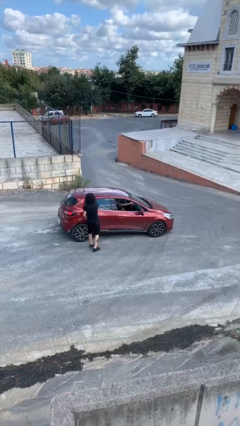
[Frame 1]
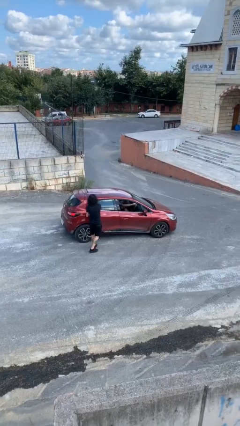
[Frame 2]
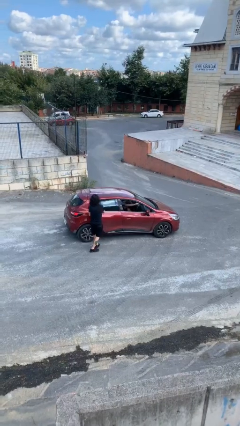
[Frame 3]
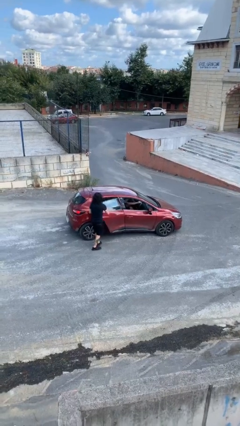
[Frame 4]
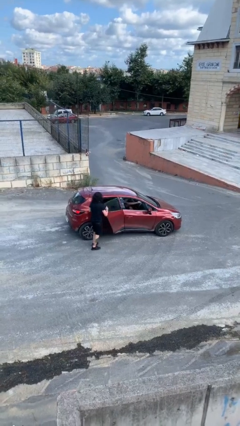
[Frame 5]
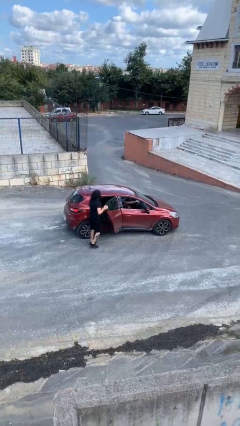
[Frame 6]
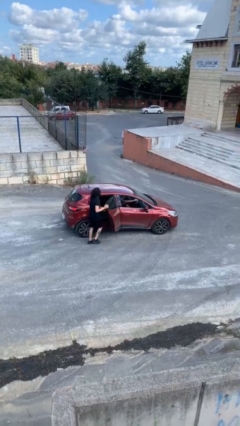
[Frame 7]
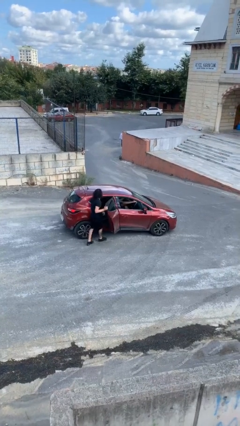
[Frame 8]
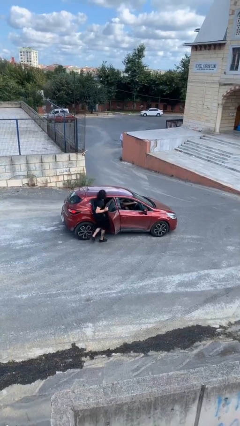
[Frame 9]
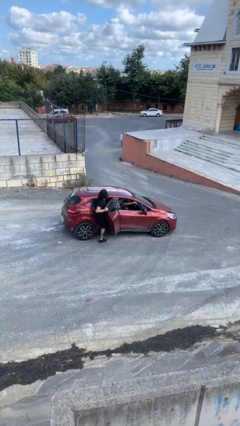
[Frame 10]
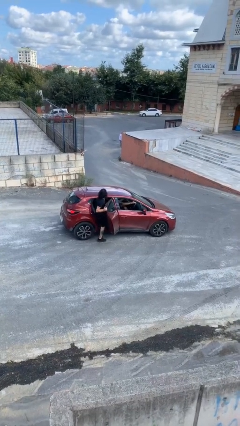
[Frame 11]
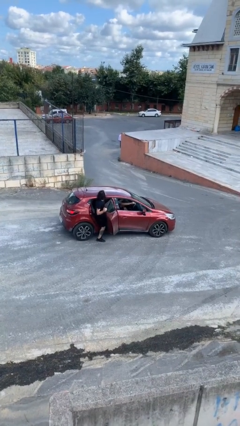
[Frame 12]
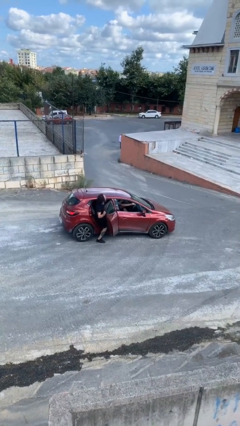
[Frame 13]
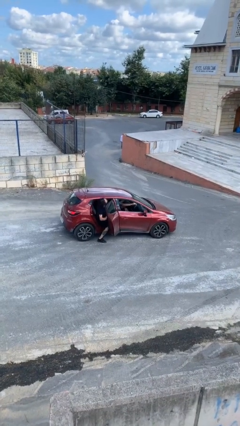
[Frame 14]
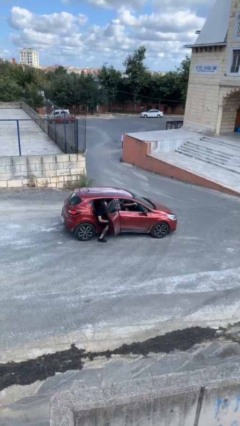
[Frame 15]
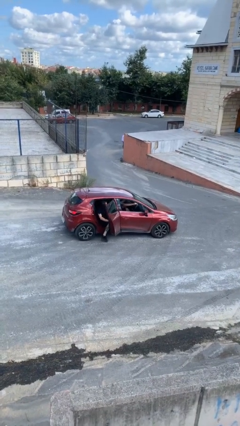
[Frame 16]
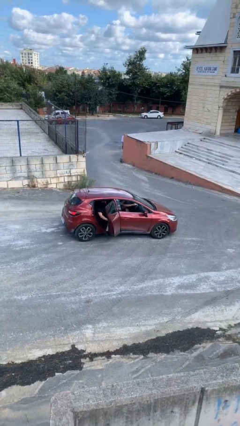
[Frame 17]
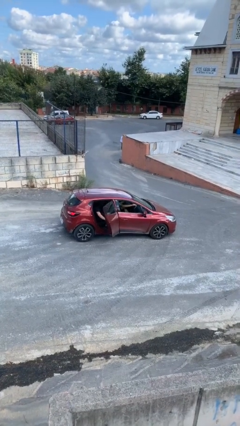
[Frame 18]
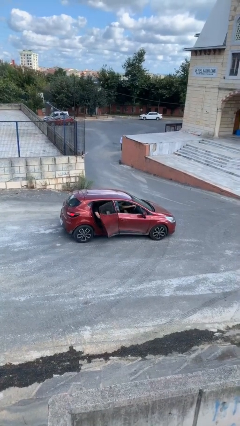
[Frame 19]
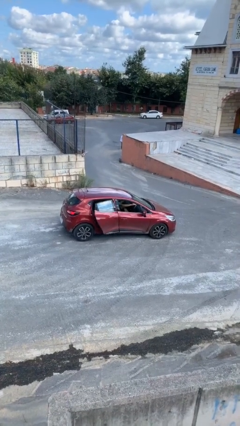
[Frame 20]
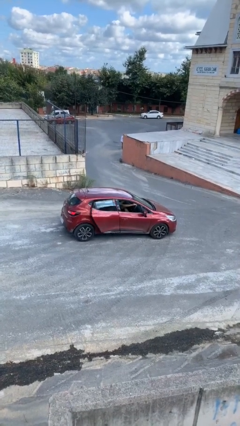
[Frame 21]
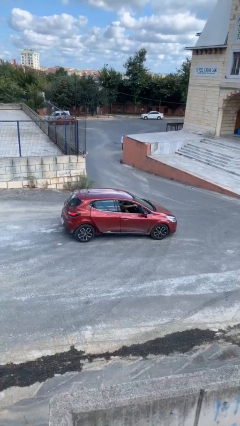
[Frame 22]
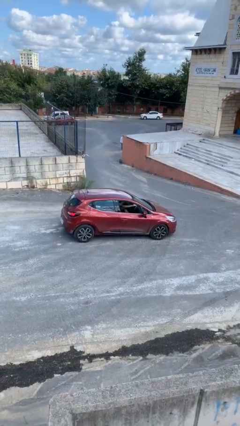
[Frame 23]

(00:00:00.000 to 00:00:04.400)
car picks up person

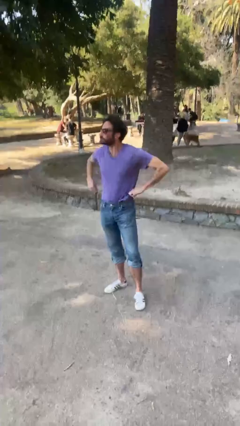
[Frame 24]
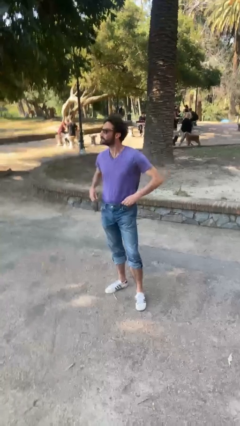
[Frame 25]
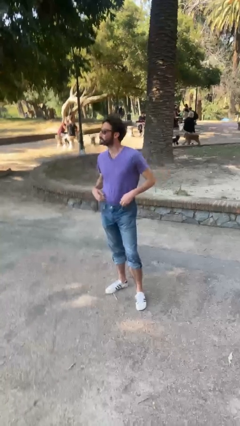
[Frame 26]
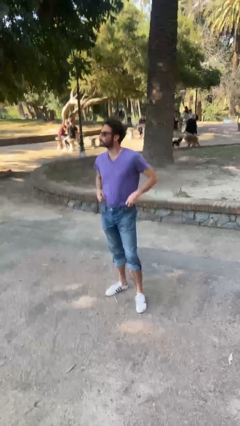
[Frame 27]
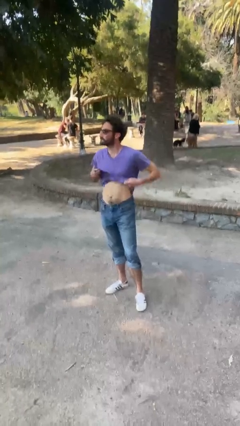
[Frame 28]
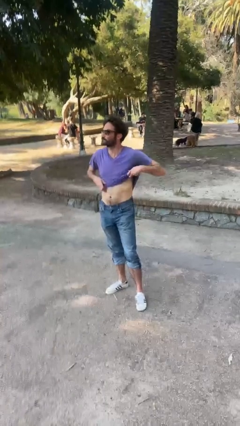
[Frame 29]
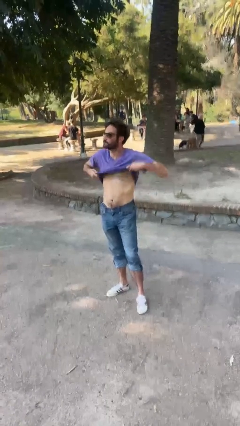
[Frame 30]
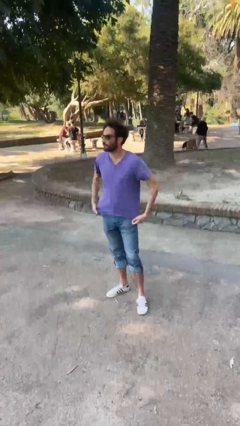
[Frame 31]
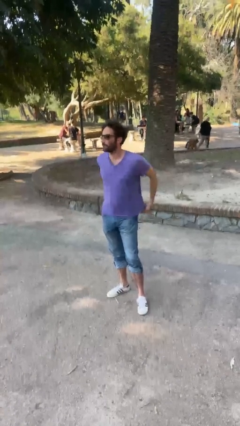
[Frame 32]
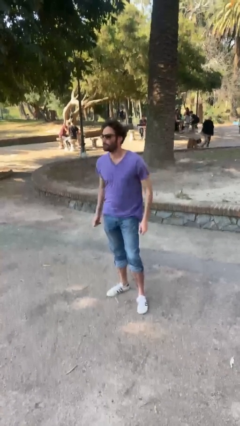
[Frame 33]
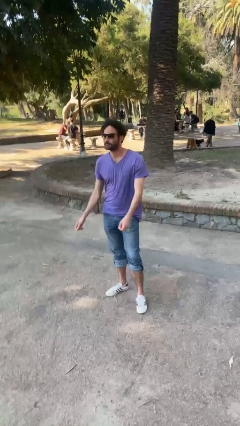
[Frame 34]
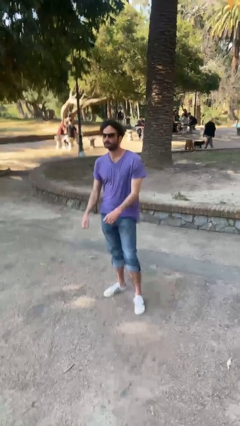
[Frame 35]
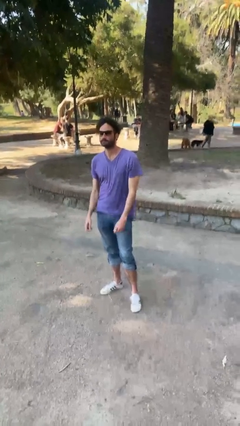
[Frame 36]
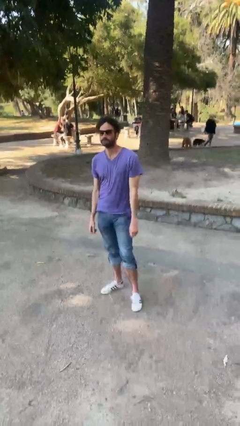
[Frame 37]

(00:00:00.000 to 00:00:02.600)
person untucks shirt

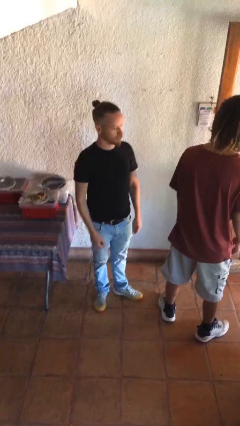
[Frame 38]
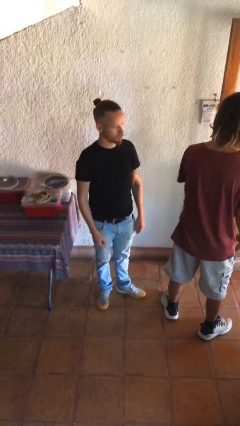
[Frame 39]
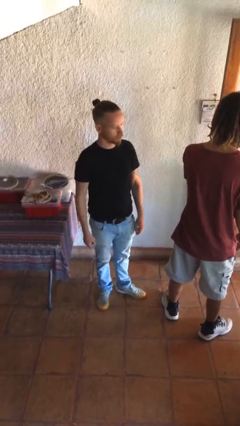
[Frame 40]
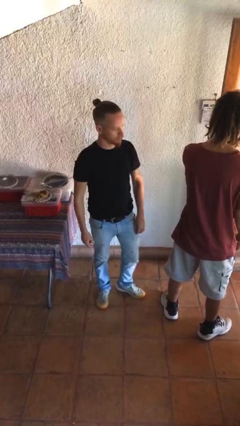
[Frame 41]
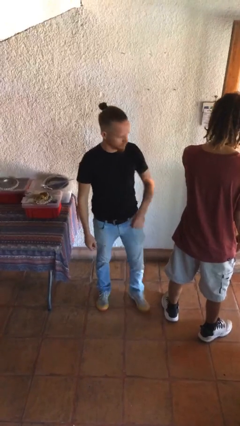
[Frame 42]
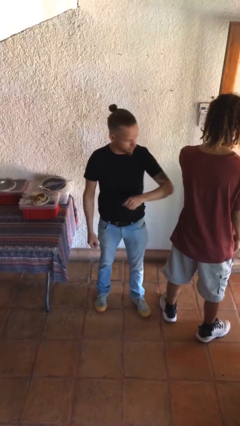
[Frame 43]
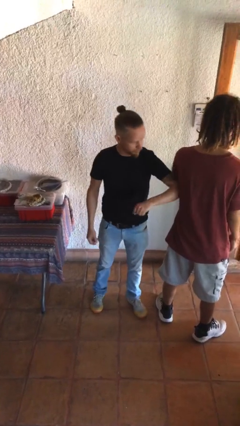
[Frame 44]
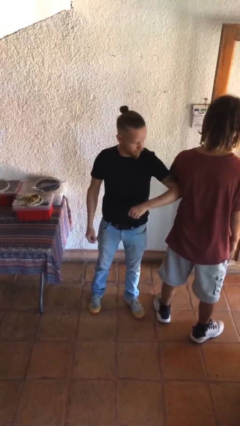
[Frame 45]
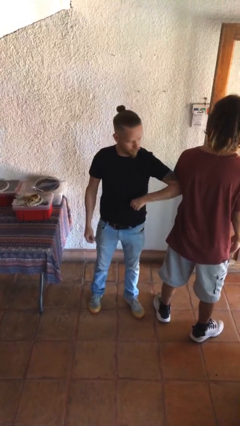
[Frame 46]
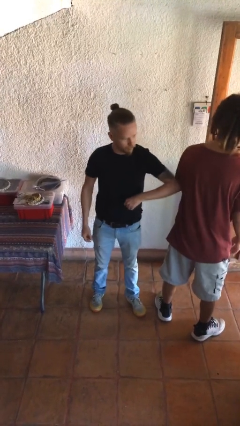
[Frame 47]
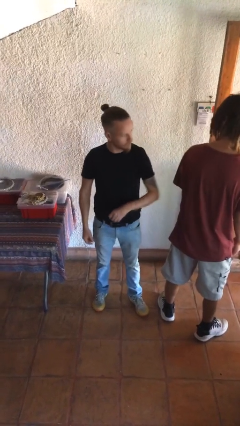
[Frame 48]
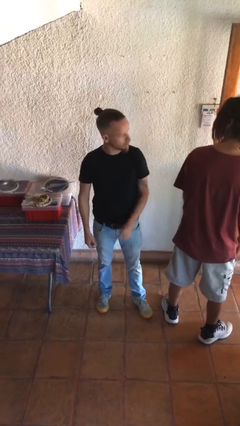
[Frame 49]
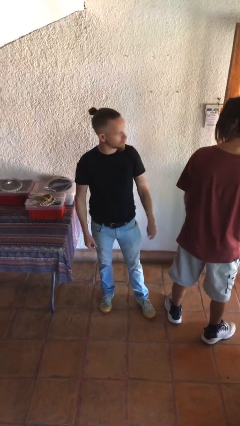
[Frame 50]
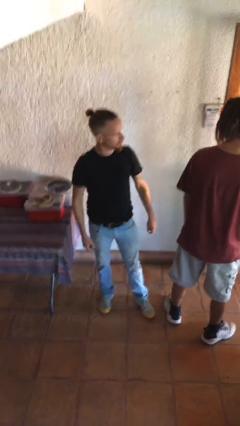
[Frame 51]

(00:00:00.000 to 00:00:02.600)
person nudges person with elbow

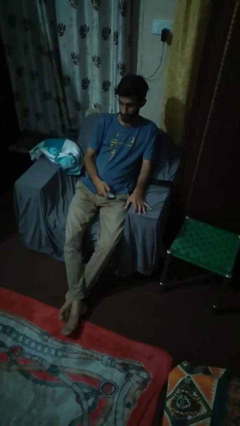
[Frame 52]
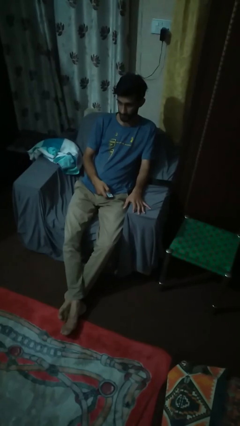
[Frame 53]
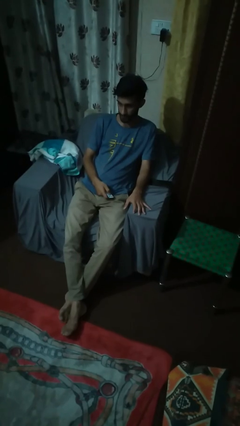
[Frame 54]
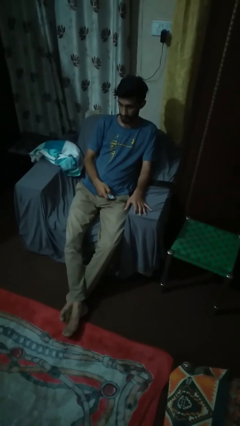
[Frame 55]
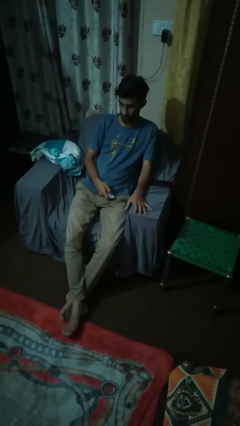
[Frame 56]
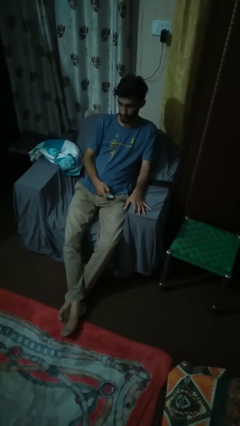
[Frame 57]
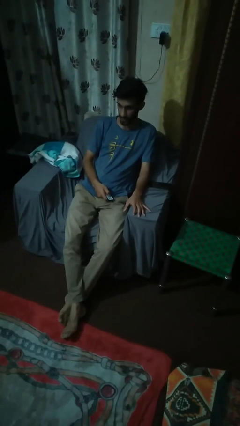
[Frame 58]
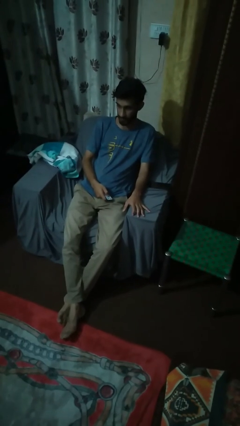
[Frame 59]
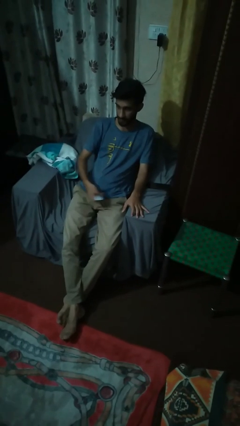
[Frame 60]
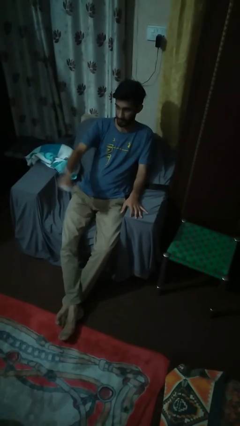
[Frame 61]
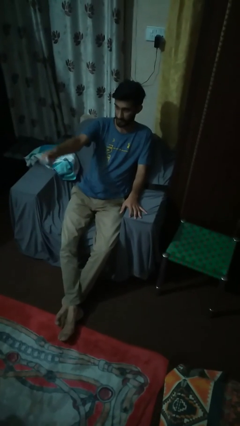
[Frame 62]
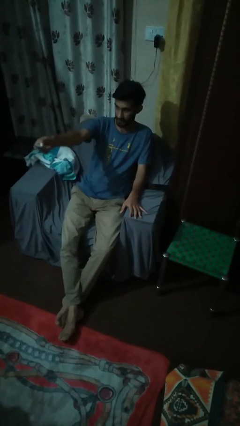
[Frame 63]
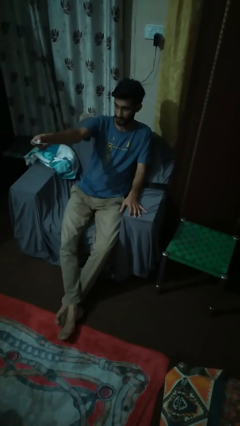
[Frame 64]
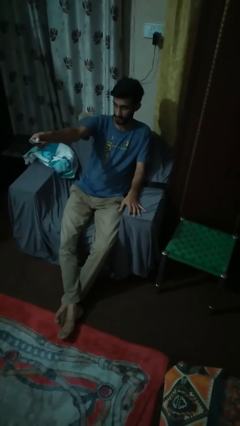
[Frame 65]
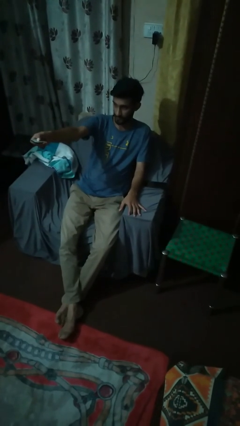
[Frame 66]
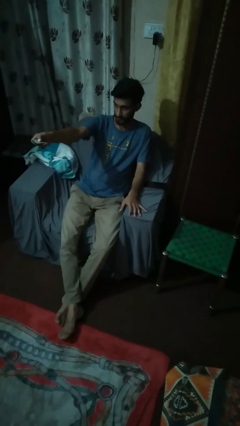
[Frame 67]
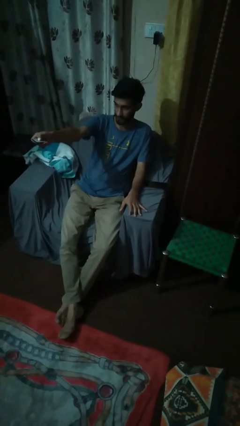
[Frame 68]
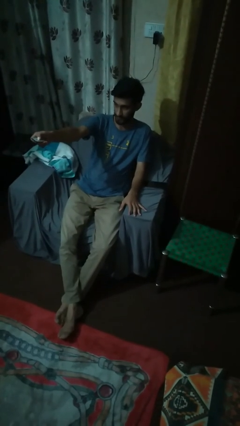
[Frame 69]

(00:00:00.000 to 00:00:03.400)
person uses television remote

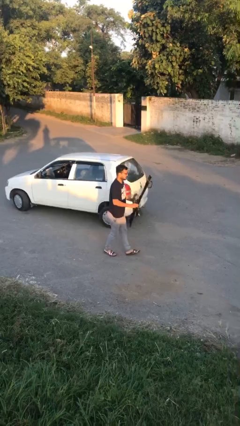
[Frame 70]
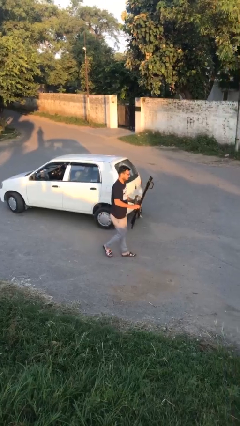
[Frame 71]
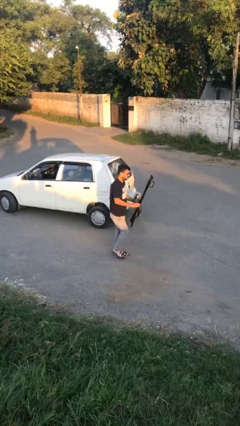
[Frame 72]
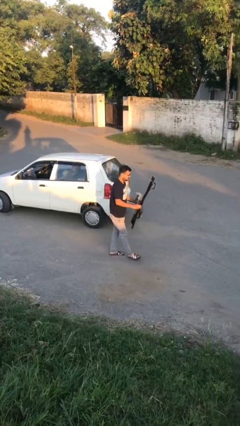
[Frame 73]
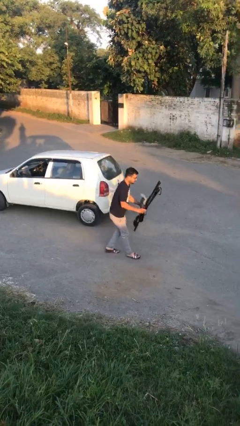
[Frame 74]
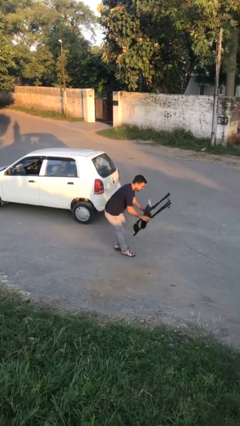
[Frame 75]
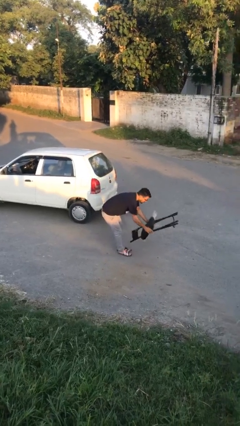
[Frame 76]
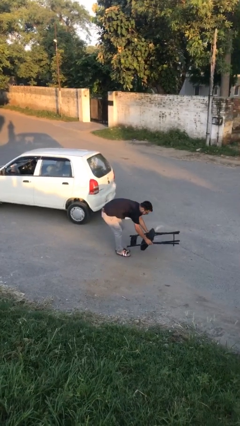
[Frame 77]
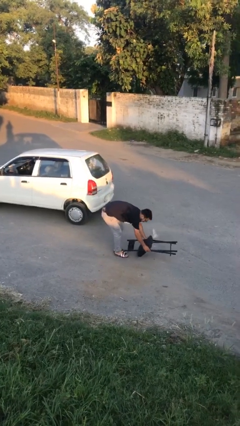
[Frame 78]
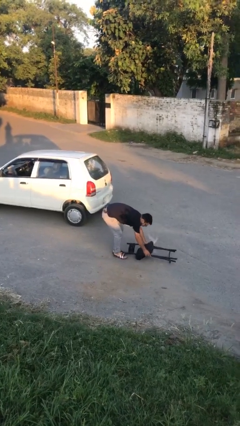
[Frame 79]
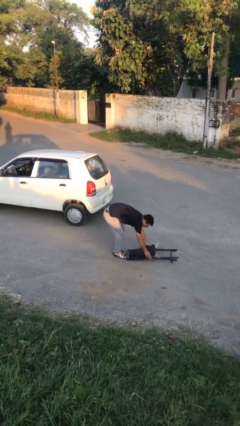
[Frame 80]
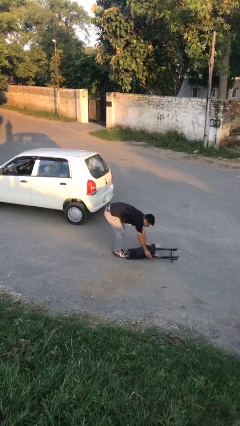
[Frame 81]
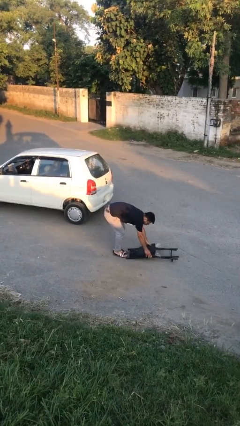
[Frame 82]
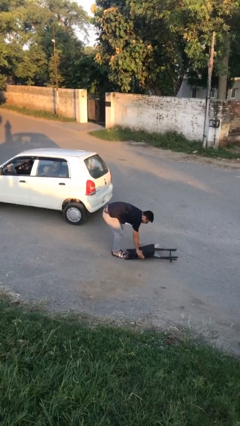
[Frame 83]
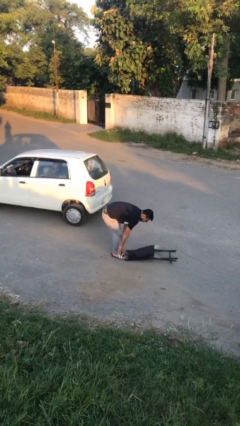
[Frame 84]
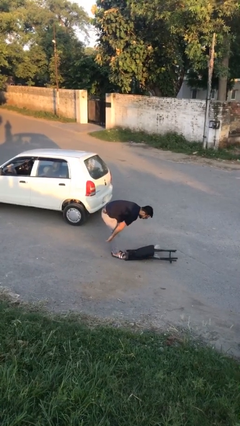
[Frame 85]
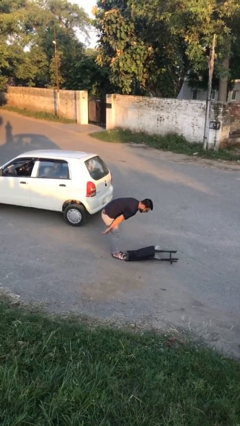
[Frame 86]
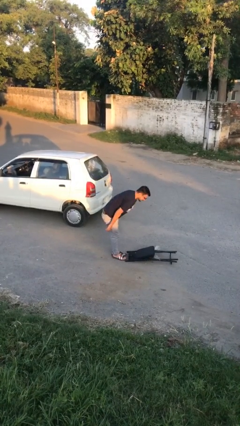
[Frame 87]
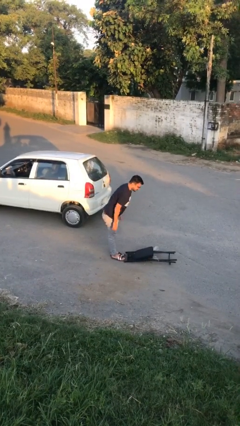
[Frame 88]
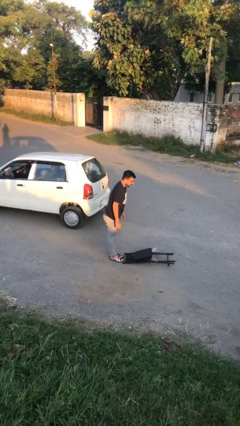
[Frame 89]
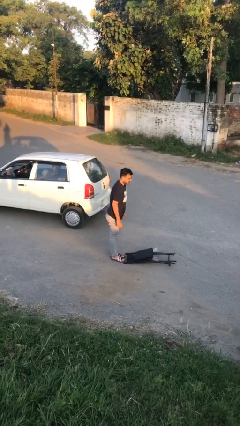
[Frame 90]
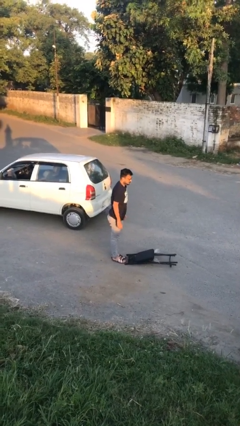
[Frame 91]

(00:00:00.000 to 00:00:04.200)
person puts down object on floor

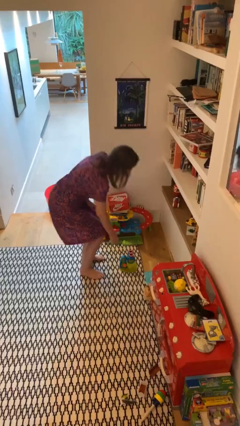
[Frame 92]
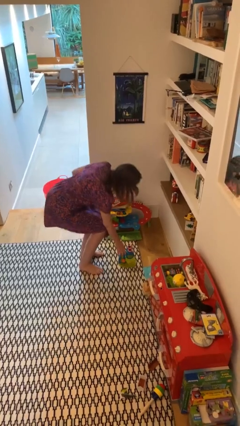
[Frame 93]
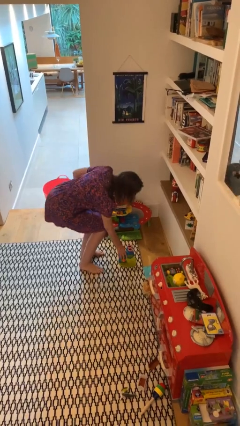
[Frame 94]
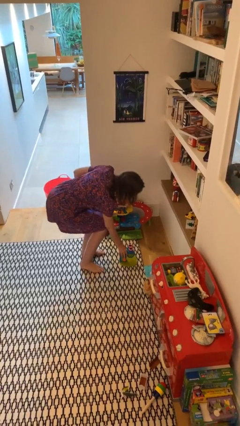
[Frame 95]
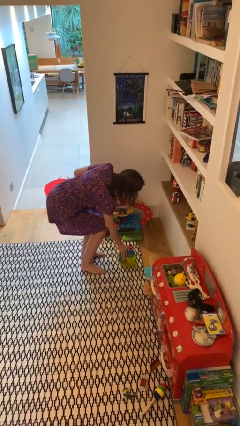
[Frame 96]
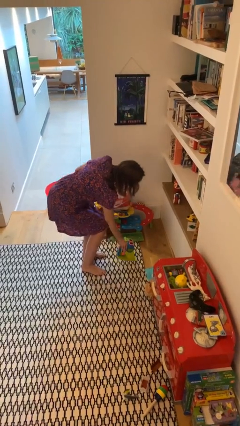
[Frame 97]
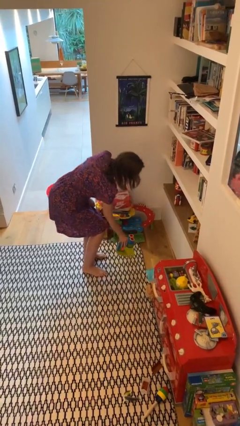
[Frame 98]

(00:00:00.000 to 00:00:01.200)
person picks up object from floor